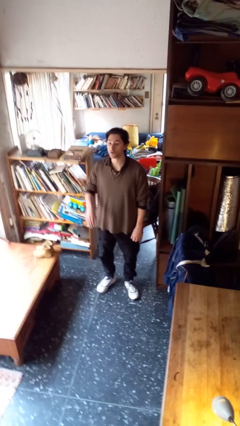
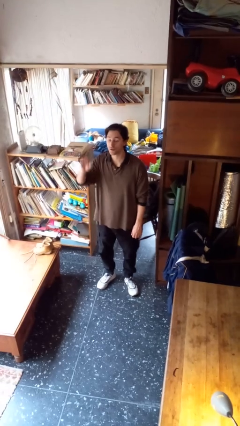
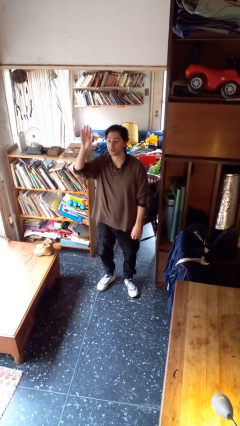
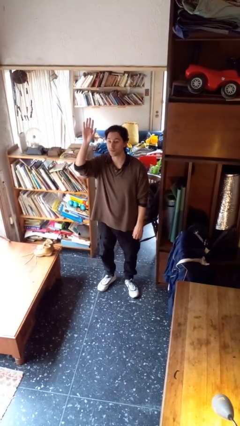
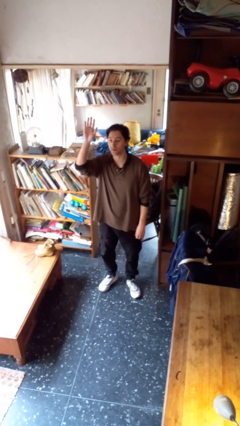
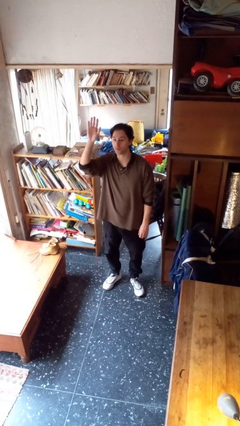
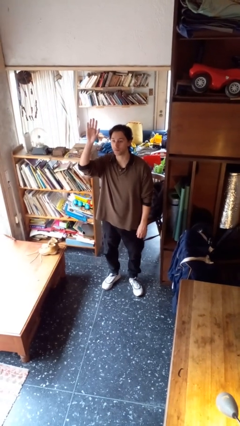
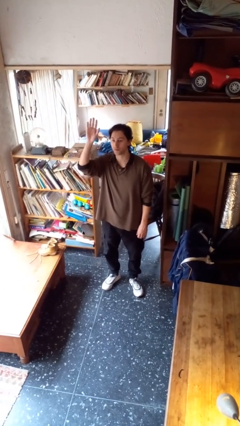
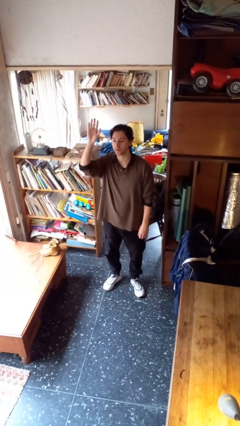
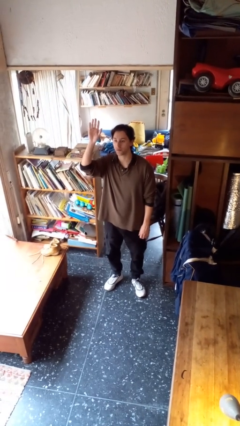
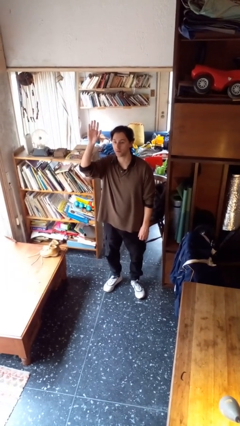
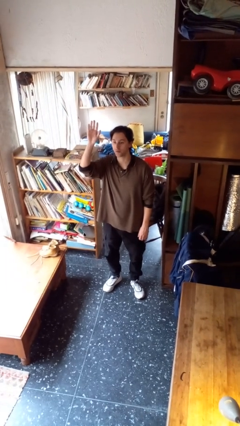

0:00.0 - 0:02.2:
person gestures raise hand

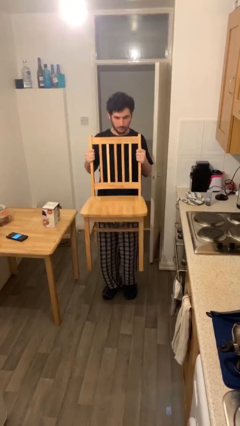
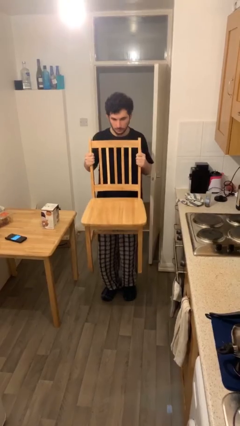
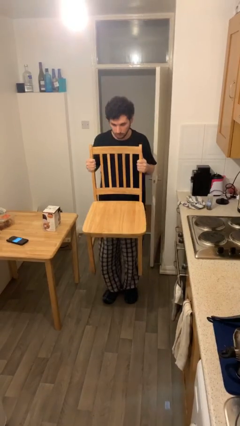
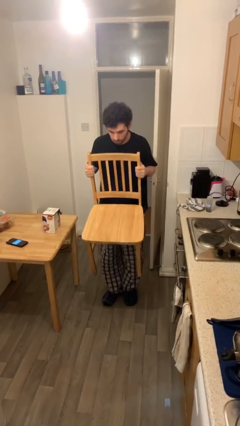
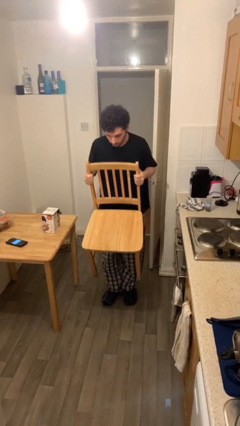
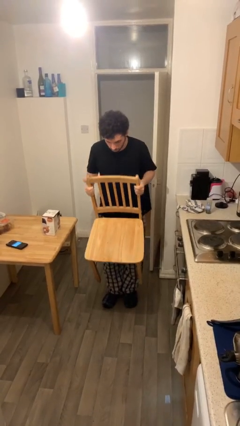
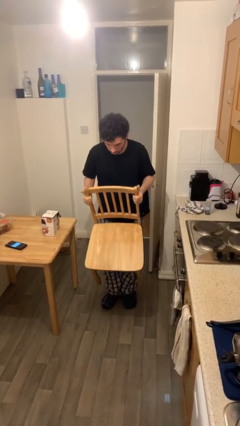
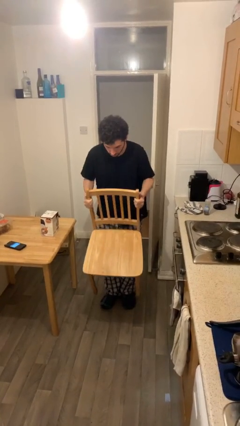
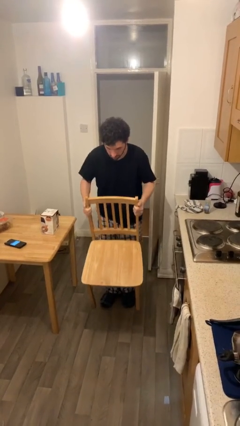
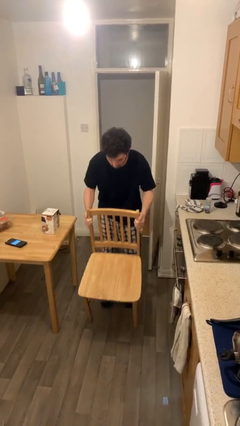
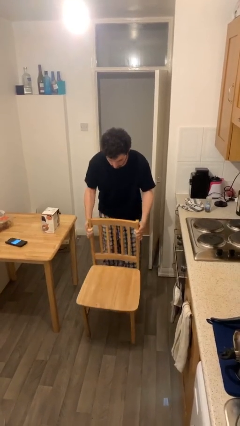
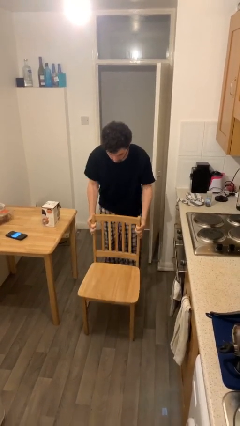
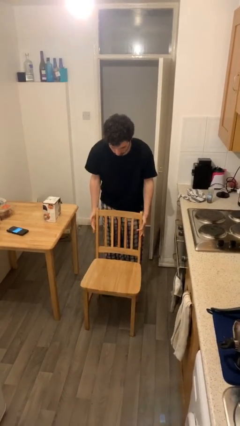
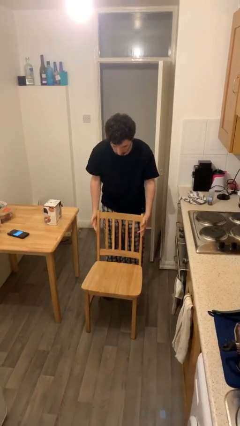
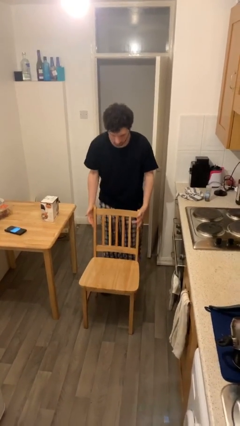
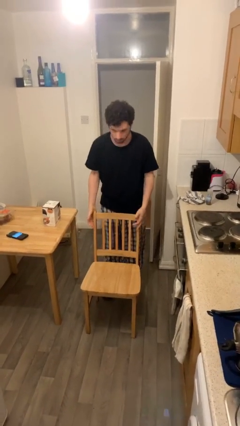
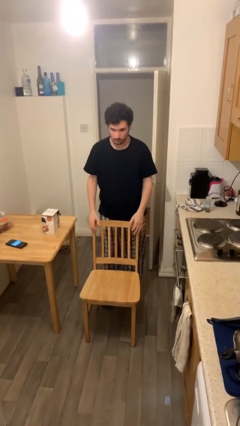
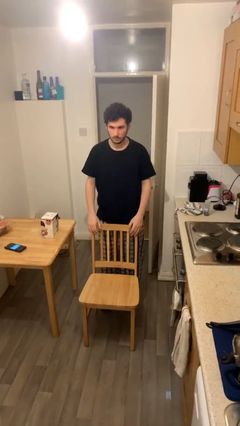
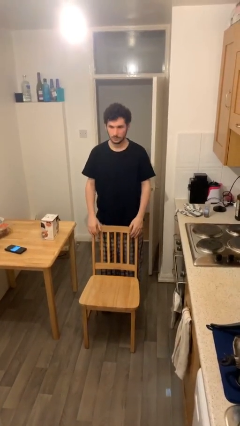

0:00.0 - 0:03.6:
person puts down object on floor

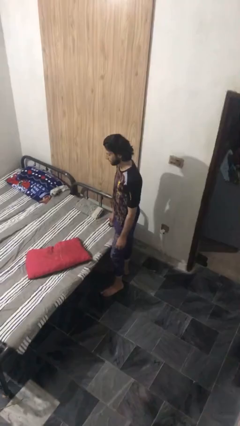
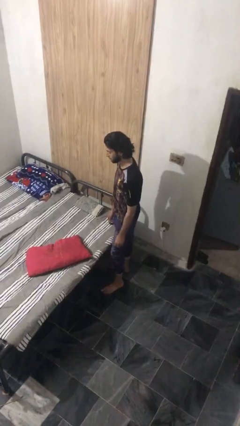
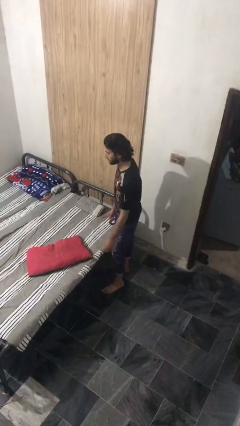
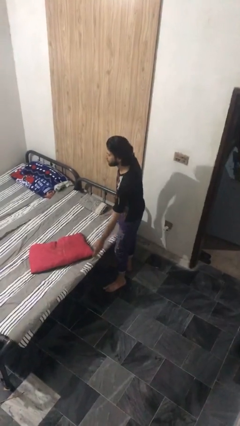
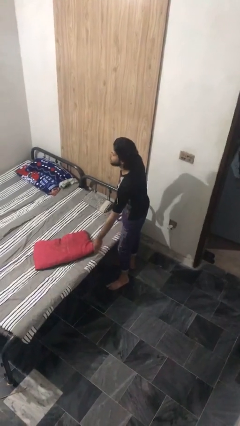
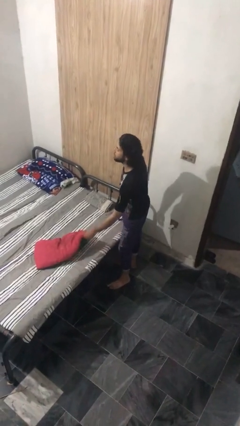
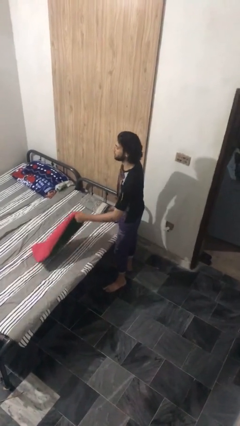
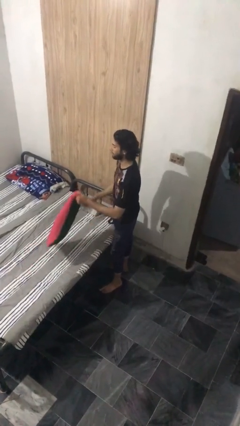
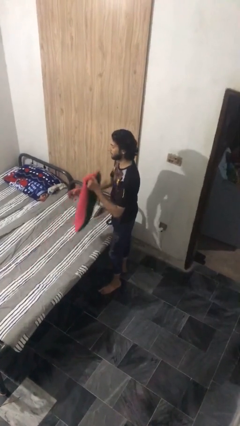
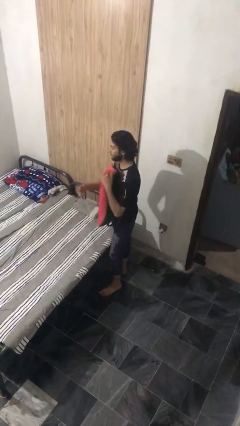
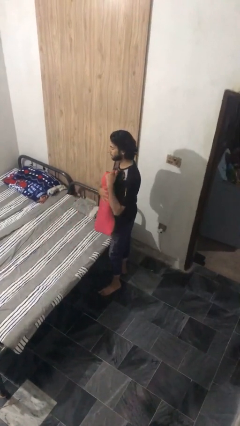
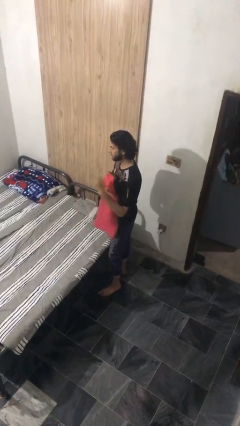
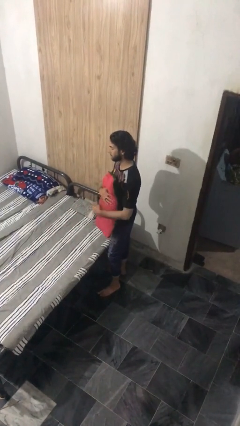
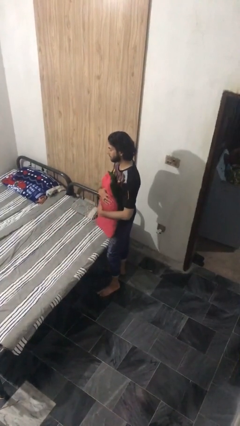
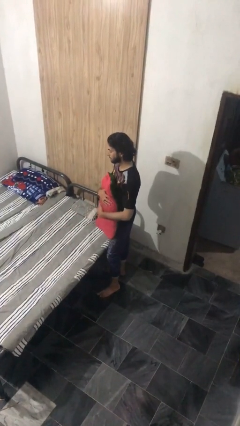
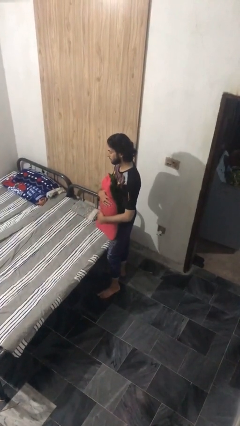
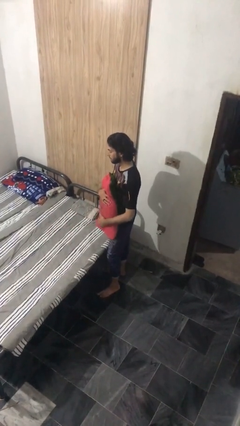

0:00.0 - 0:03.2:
person picks up object from bed

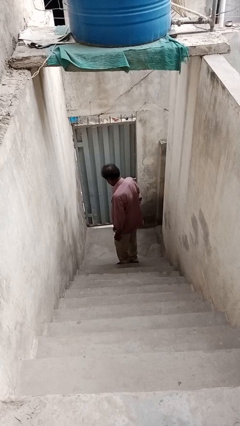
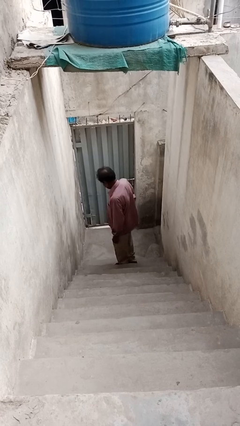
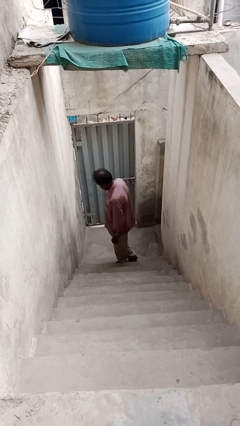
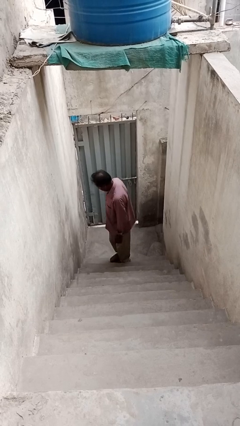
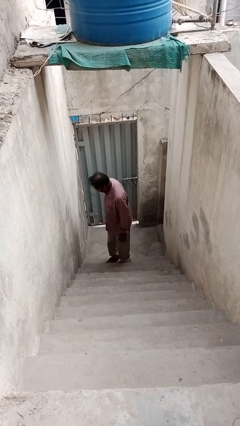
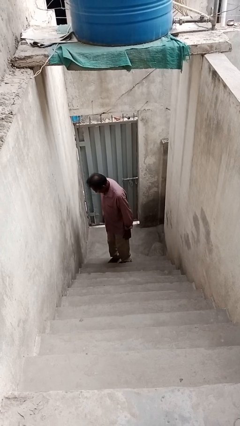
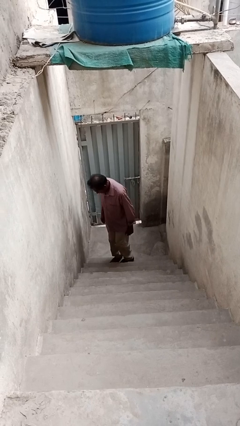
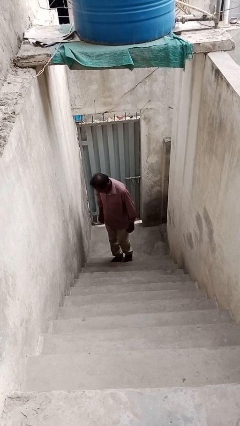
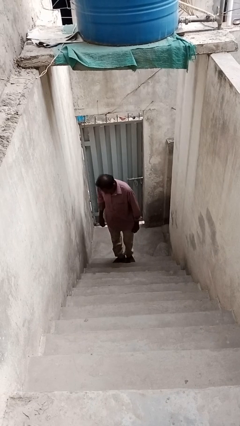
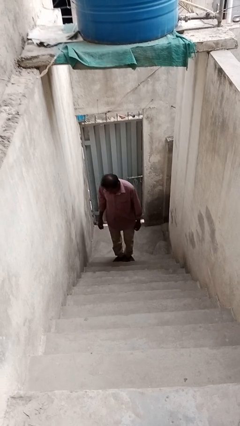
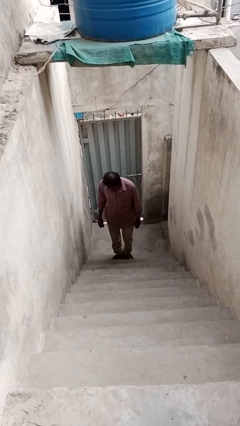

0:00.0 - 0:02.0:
person trips on stair

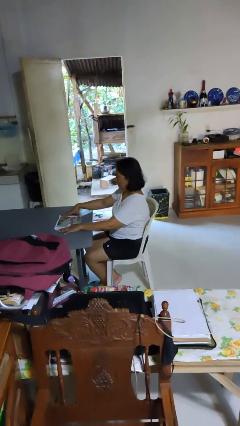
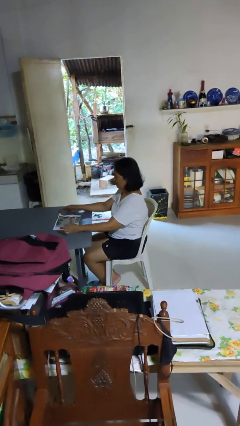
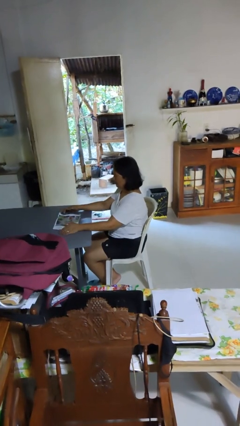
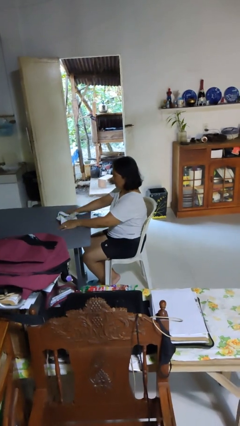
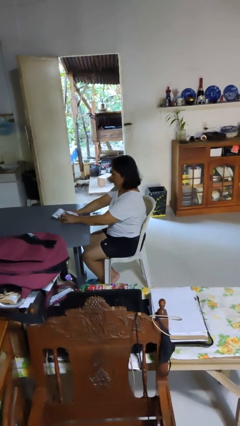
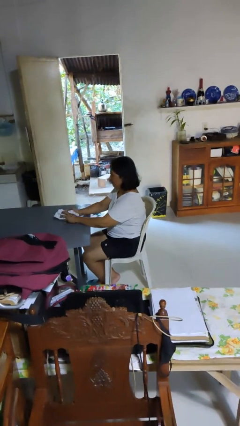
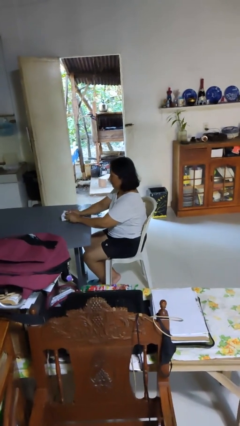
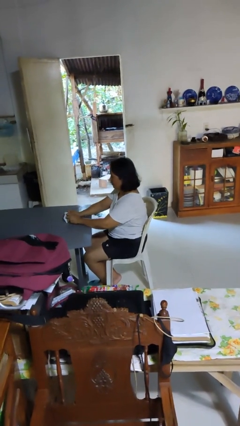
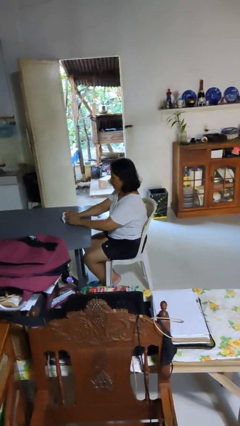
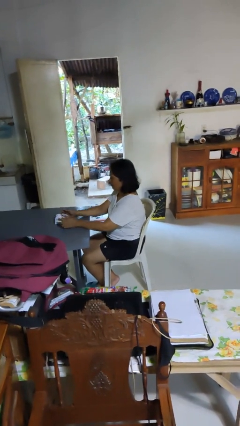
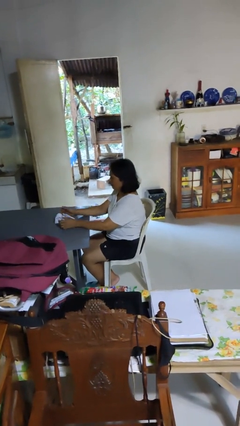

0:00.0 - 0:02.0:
person crumples paper

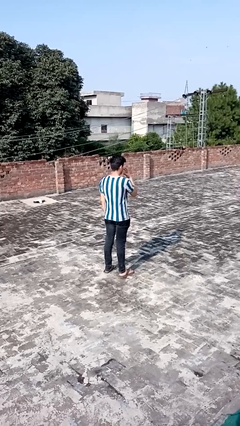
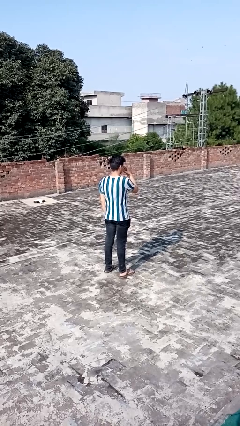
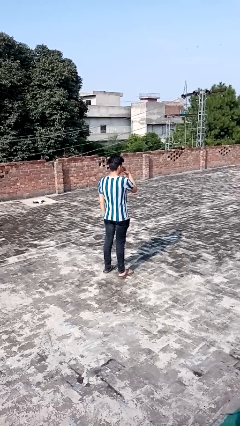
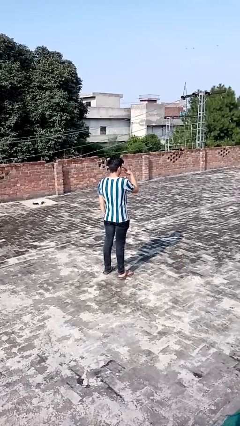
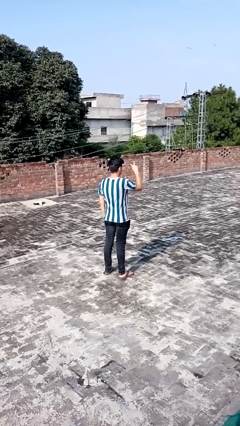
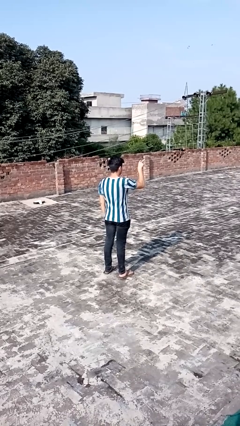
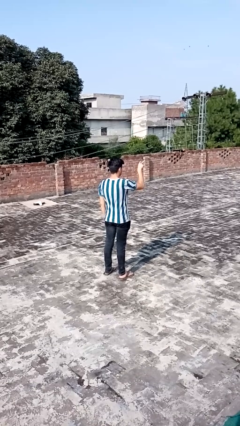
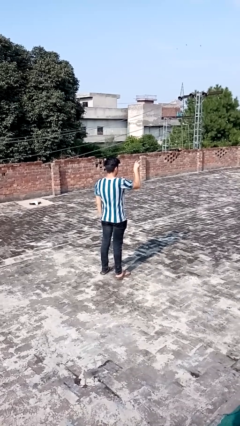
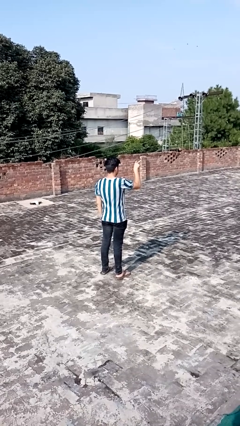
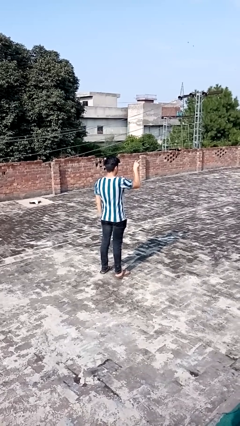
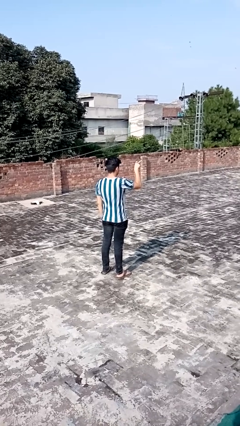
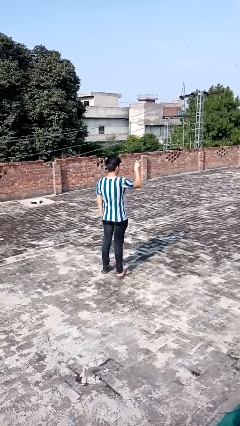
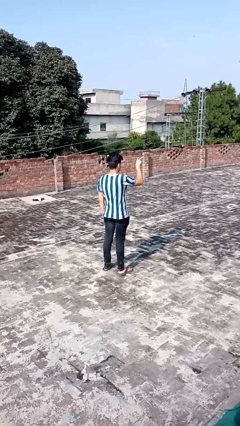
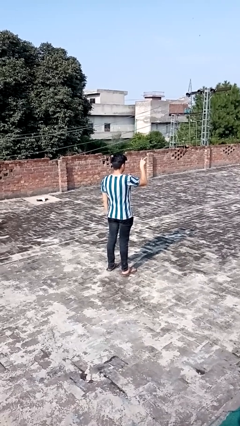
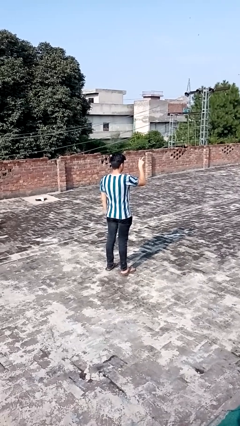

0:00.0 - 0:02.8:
person gestures watch closely

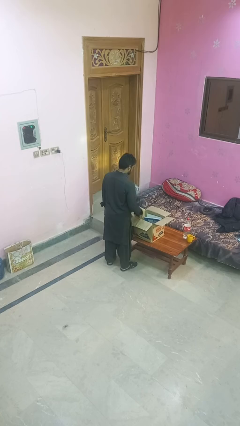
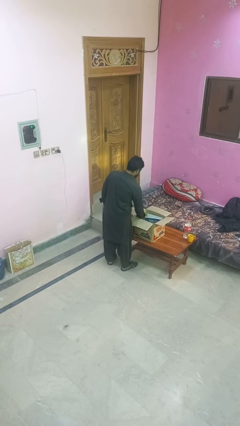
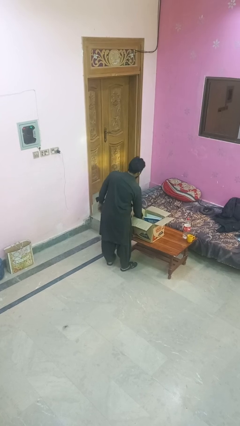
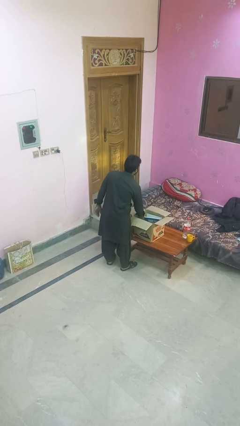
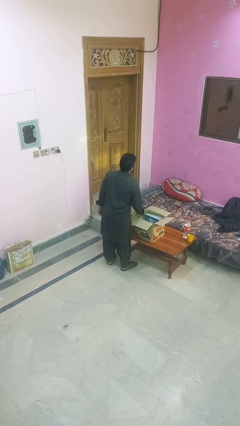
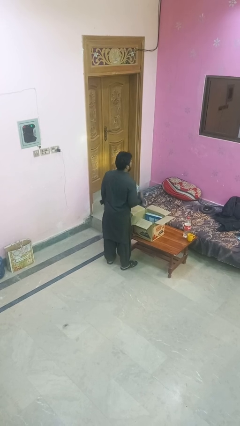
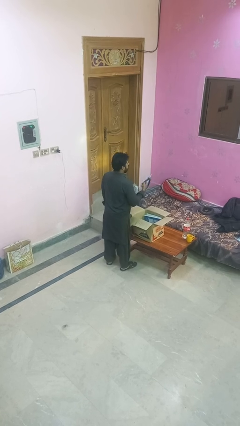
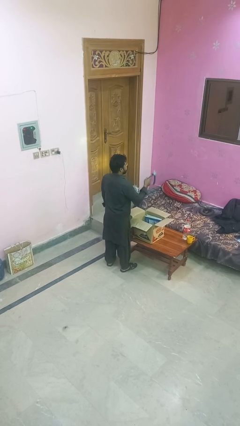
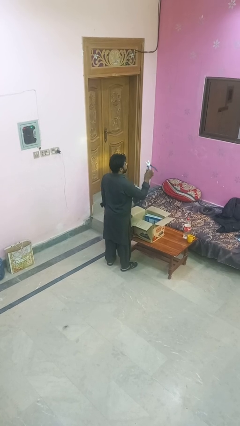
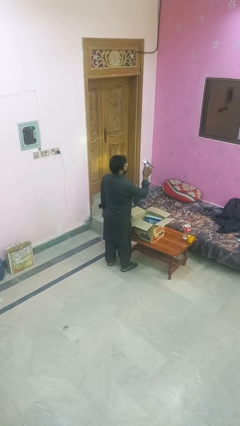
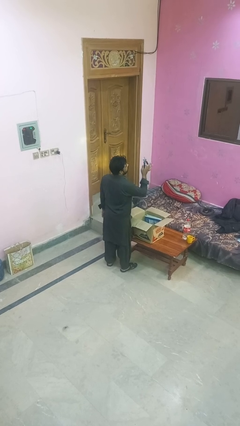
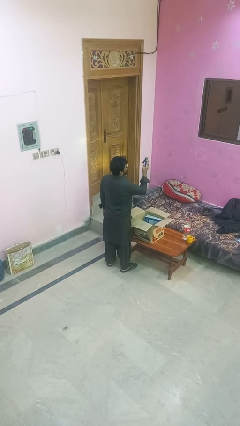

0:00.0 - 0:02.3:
person takes object from box
